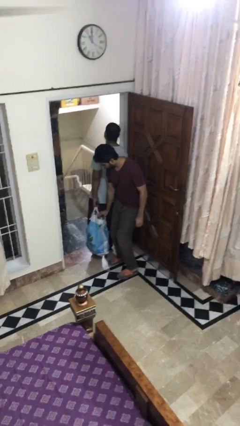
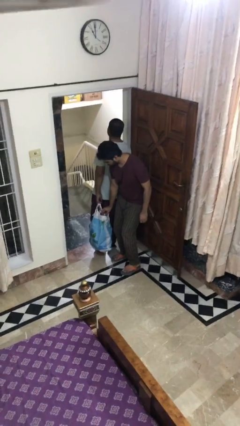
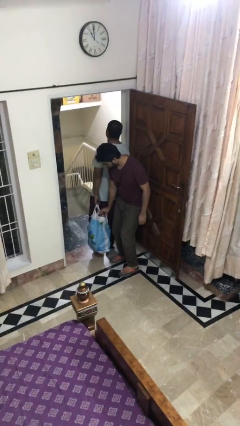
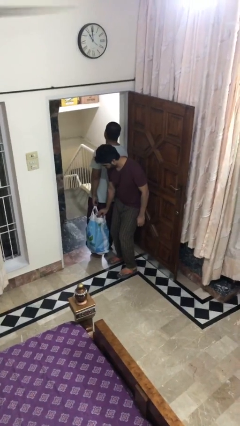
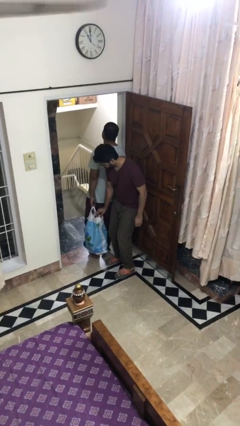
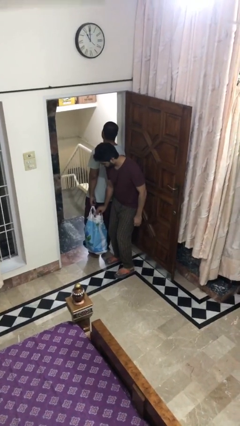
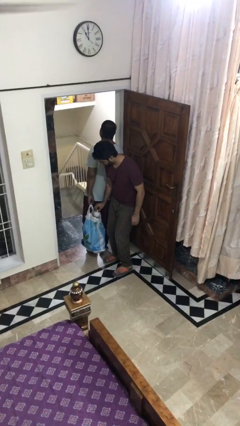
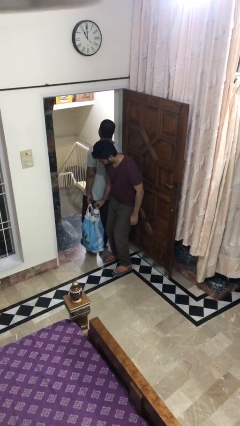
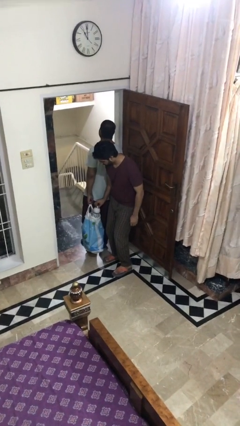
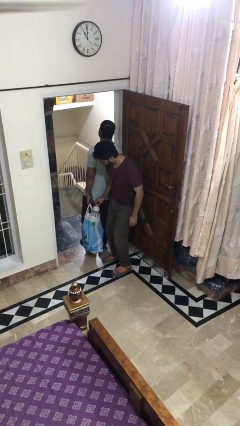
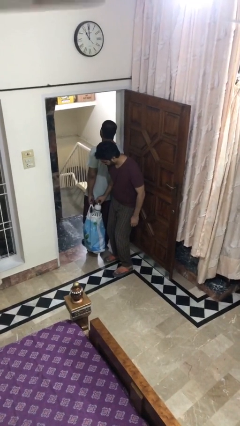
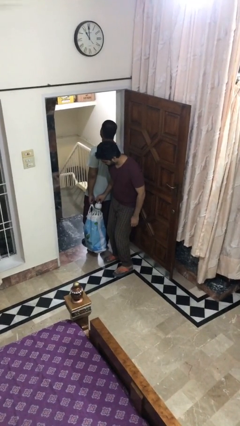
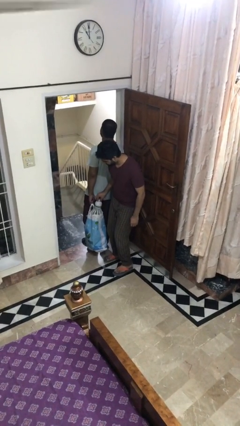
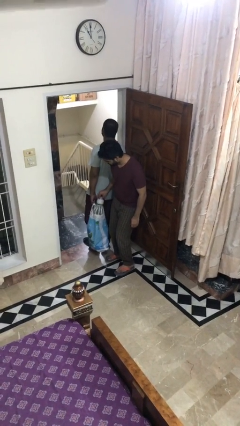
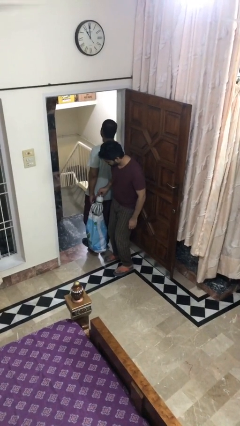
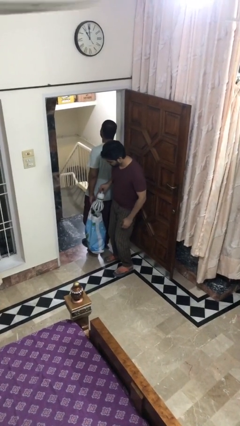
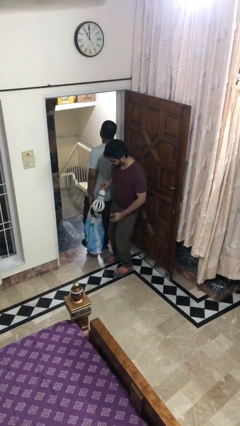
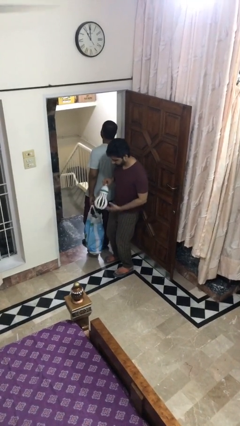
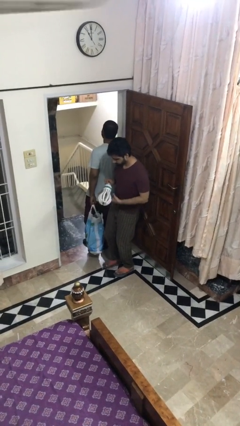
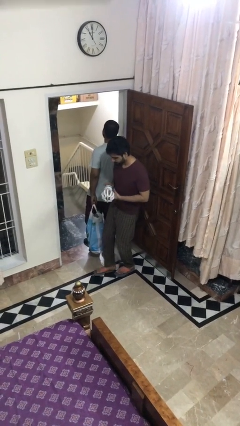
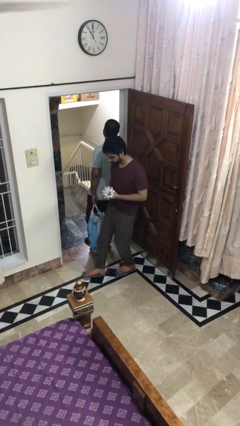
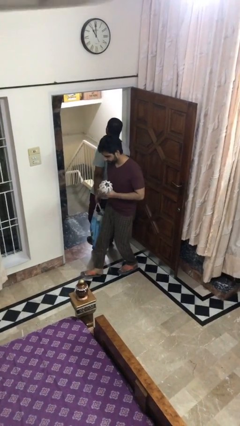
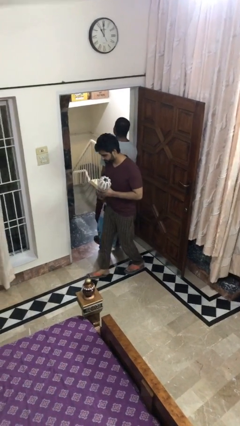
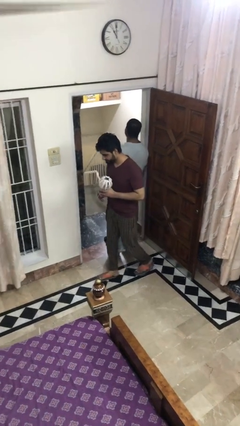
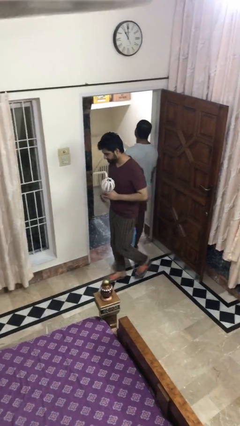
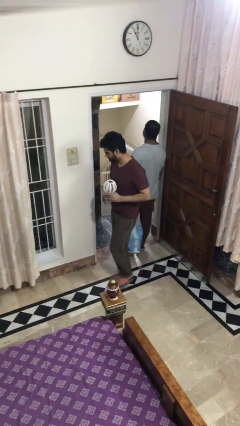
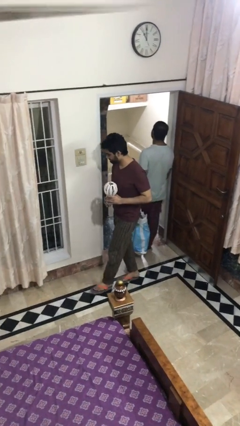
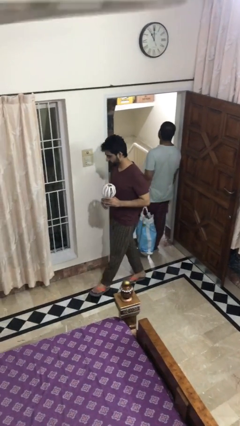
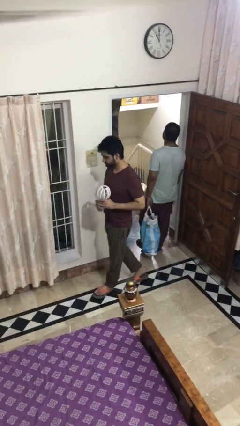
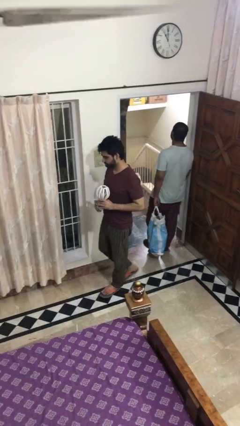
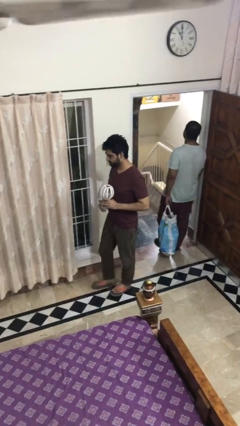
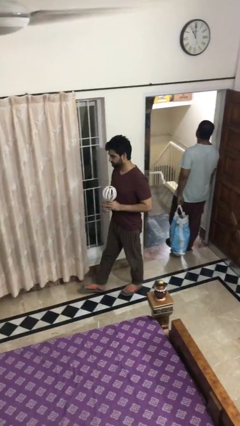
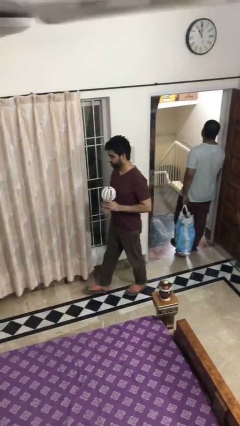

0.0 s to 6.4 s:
person steals object from person

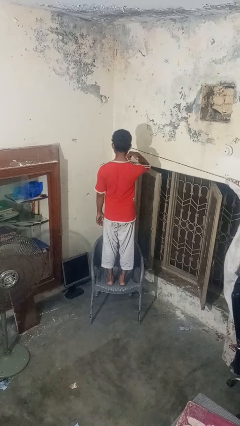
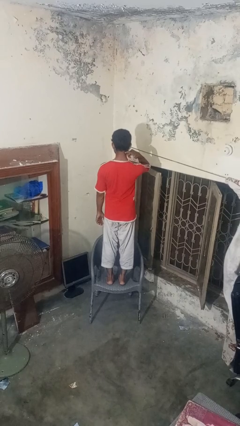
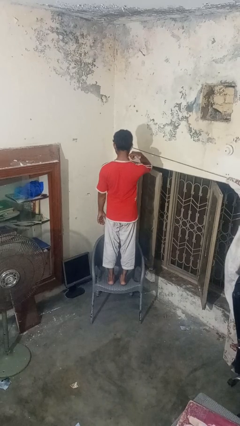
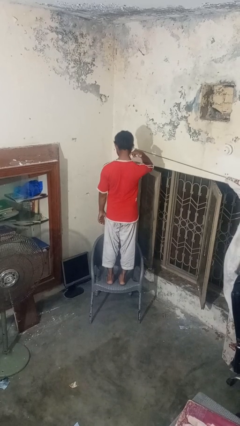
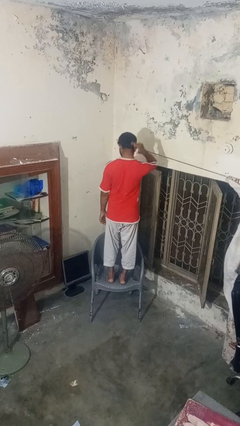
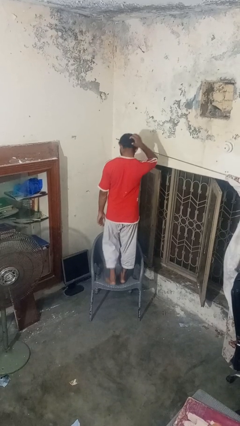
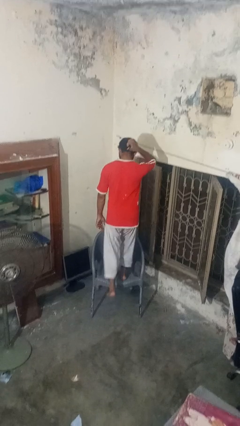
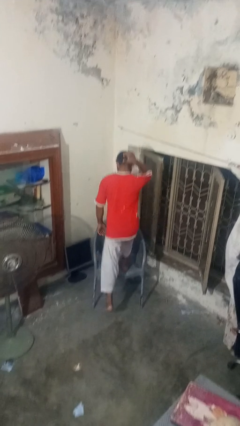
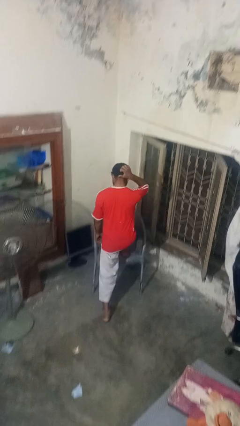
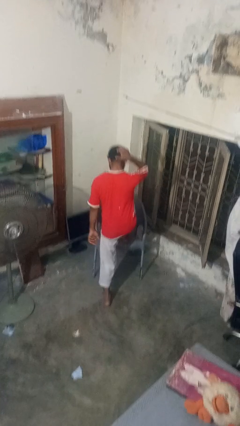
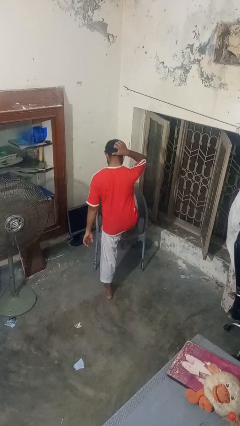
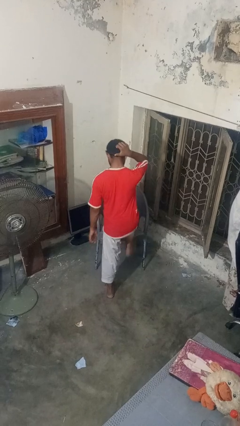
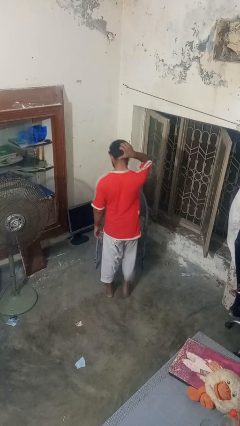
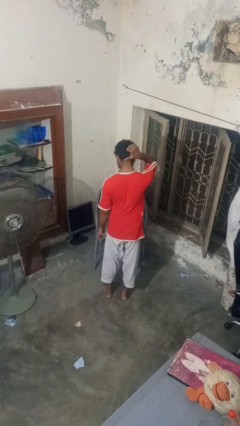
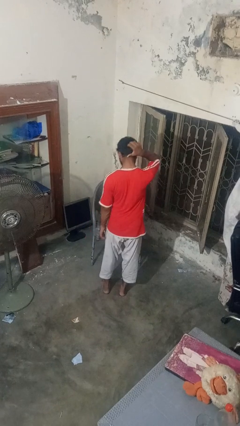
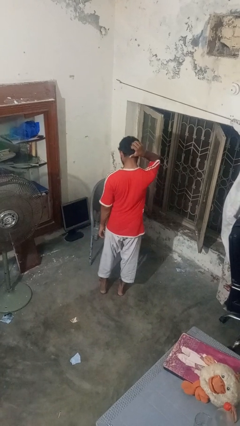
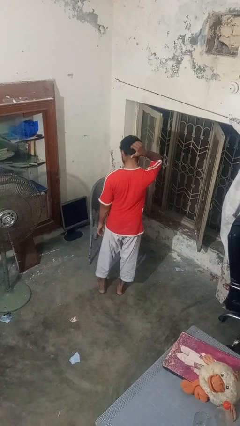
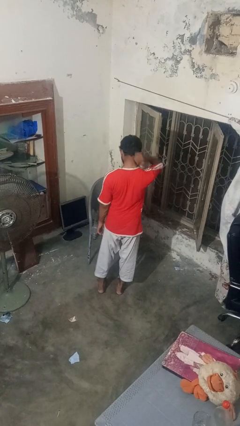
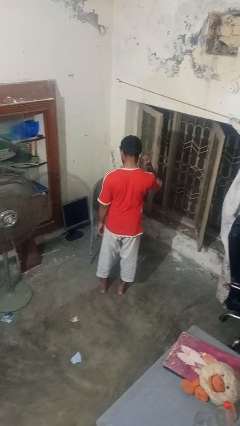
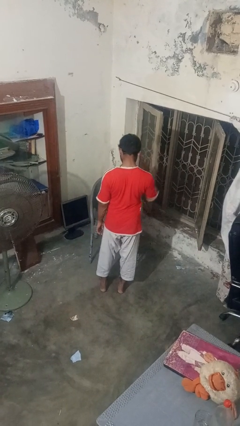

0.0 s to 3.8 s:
person climbs off chair

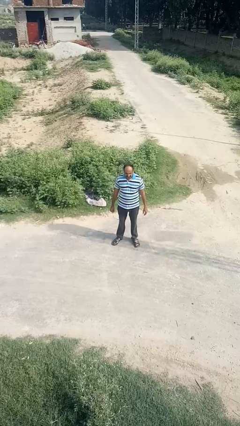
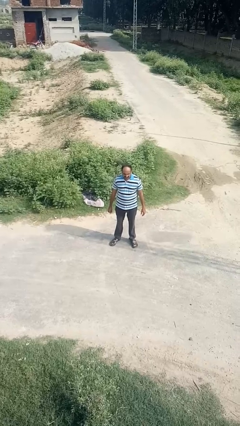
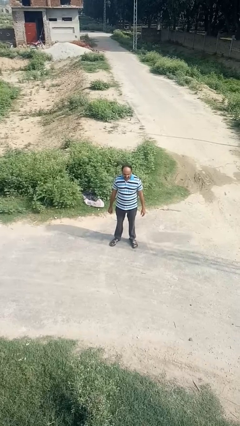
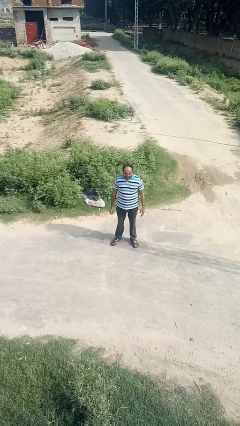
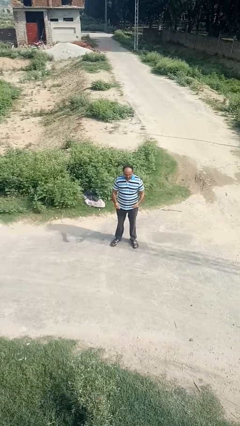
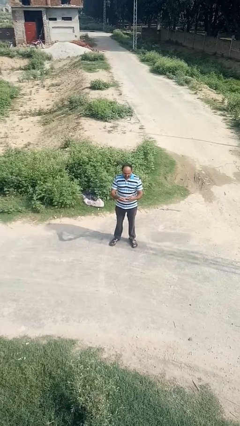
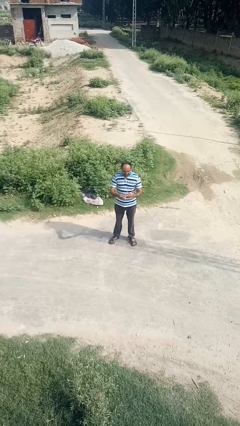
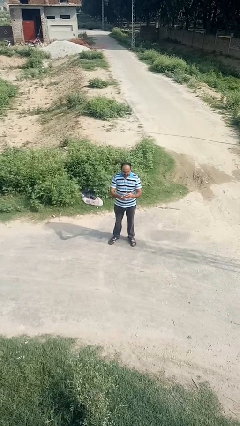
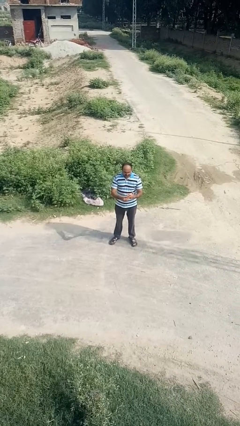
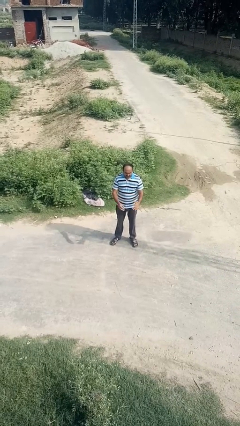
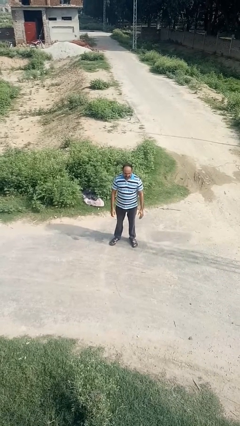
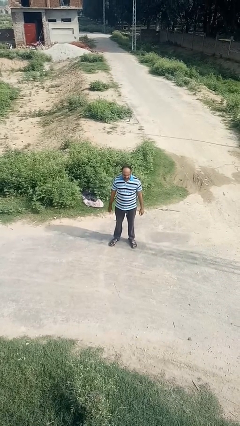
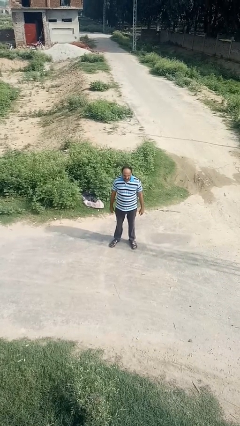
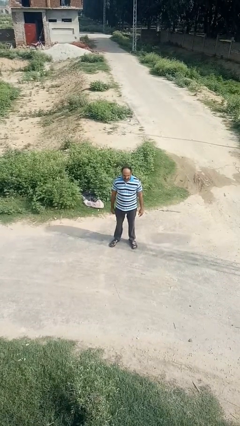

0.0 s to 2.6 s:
person puts on ring

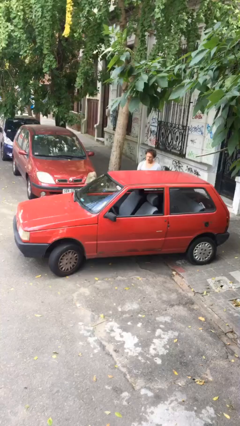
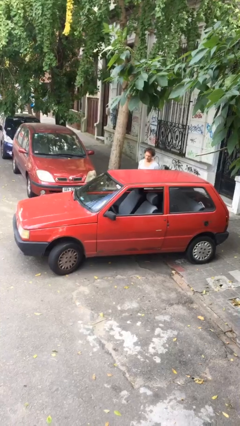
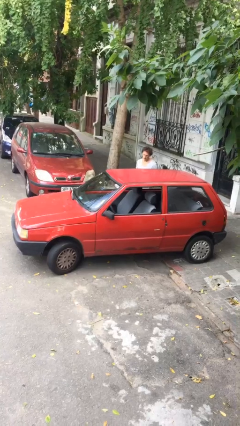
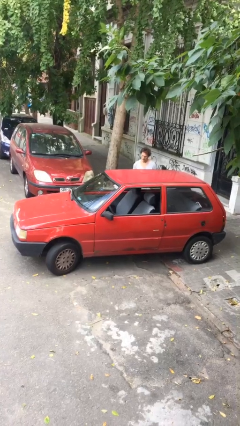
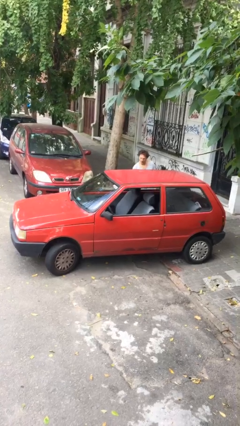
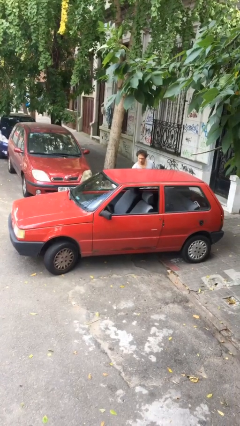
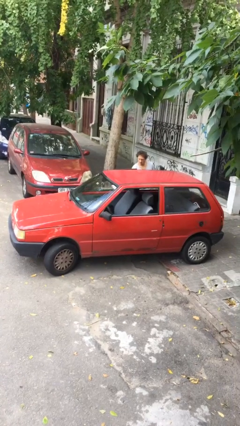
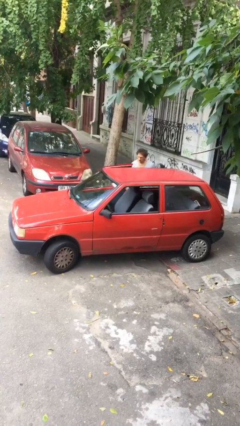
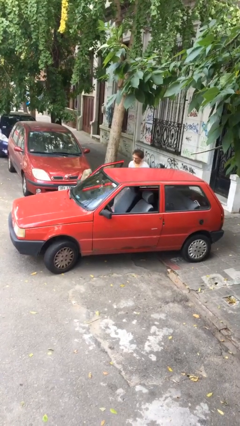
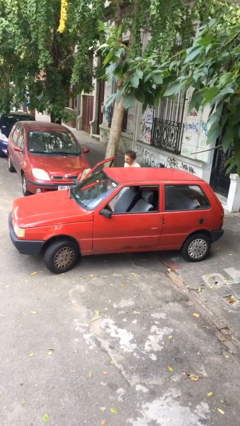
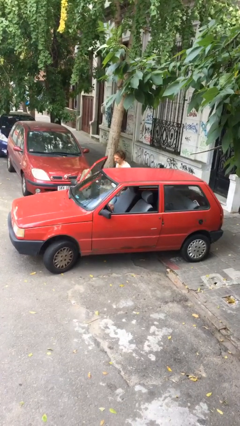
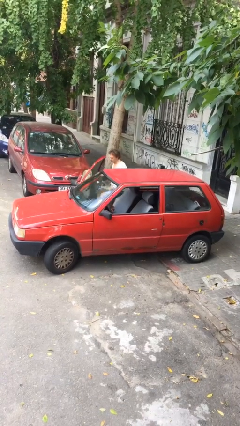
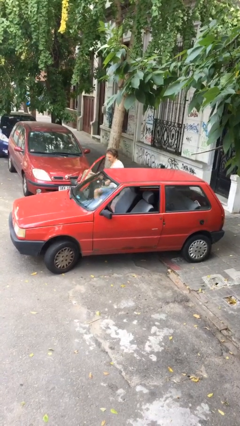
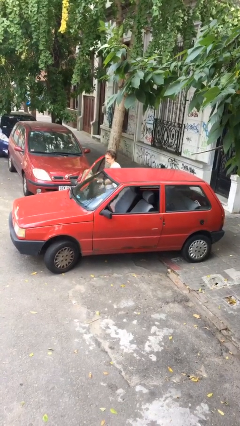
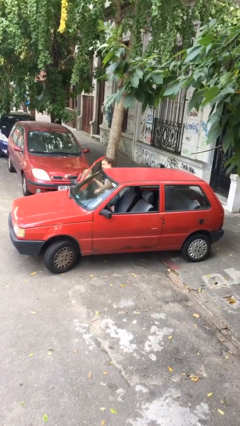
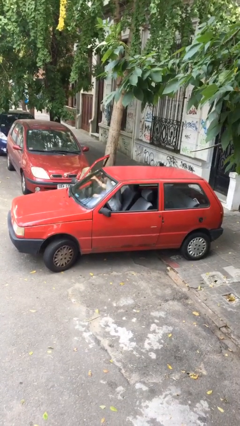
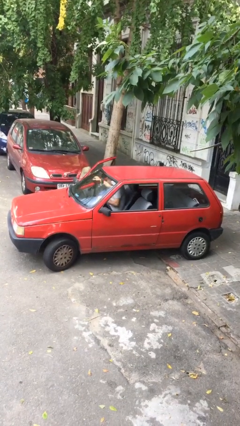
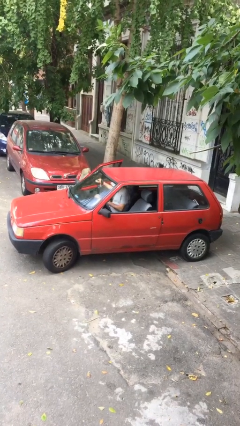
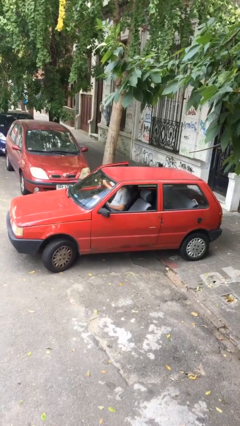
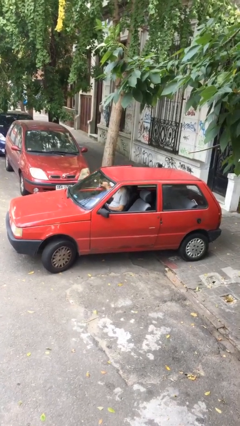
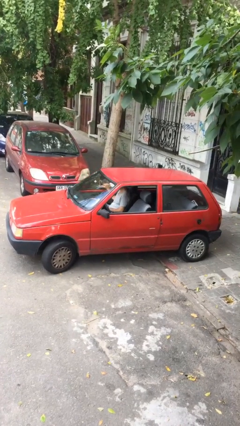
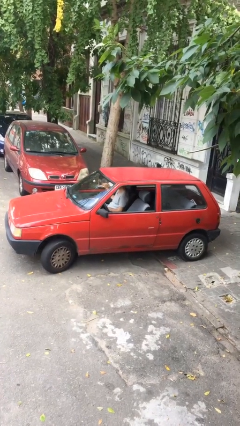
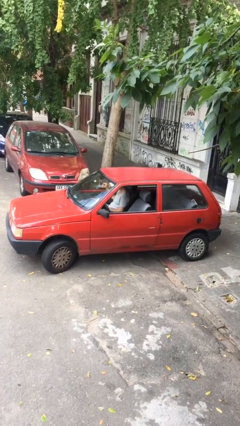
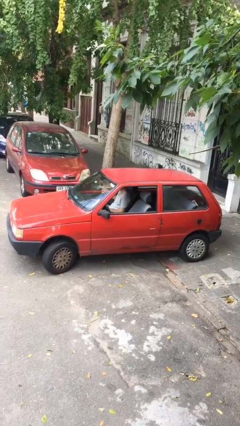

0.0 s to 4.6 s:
car picks up person
